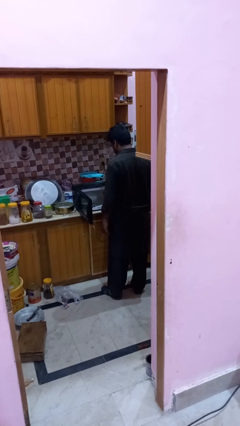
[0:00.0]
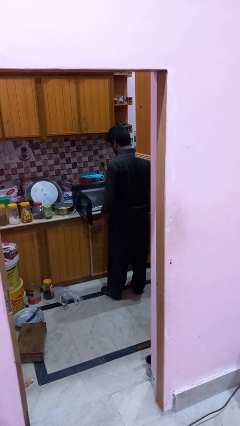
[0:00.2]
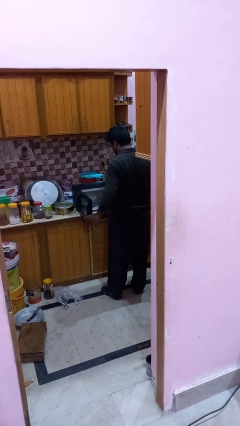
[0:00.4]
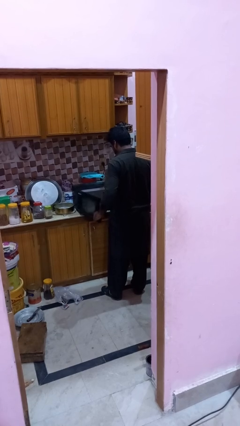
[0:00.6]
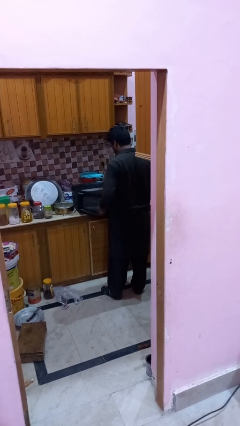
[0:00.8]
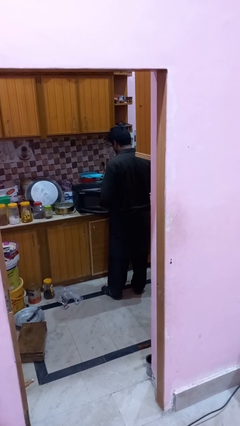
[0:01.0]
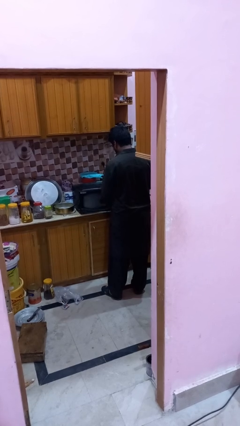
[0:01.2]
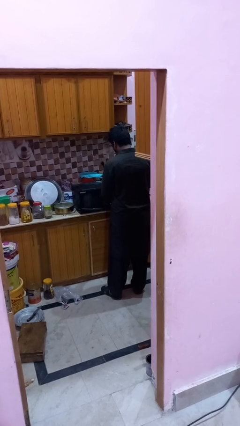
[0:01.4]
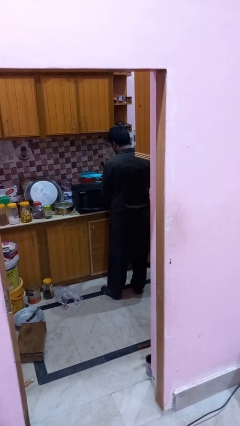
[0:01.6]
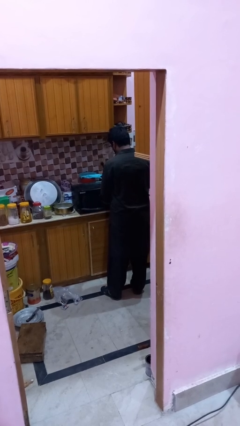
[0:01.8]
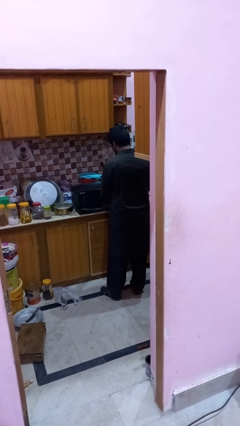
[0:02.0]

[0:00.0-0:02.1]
person closes oven door

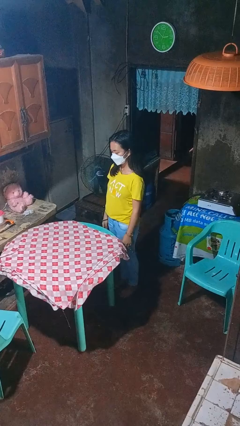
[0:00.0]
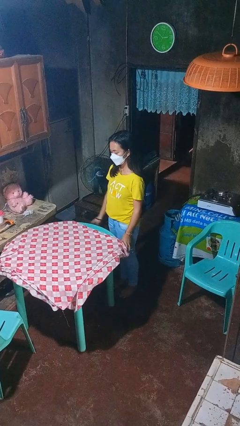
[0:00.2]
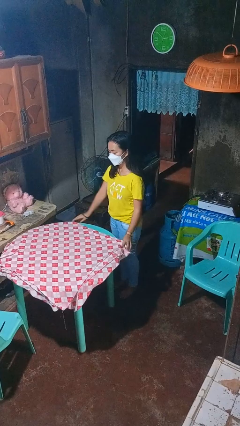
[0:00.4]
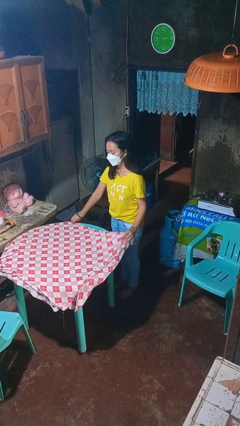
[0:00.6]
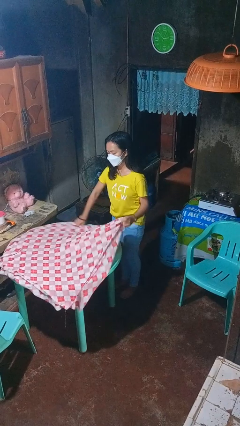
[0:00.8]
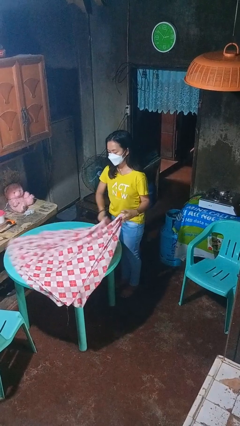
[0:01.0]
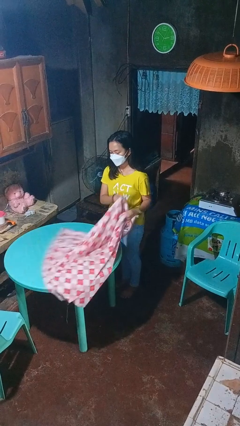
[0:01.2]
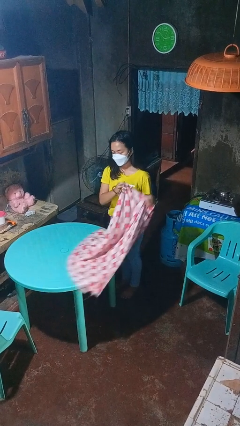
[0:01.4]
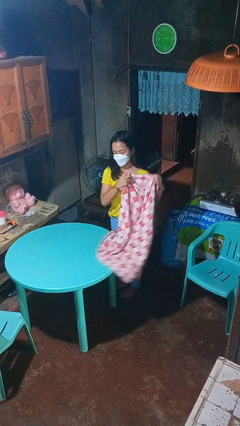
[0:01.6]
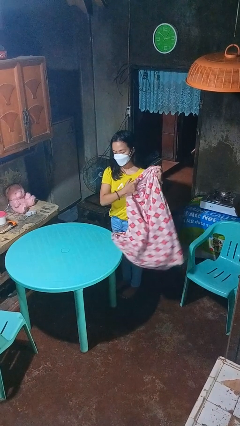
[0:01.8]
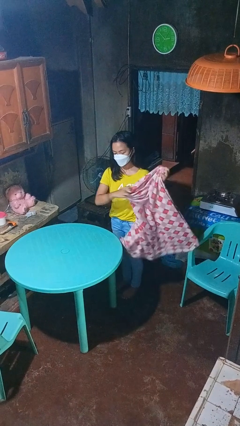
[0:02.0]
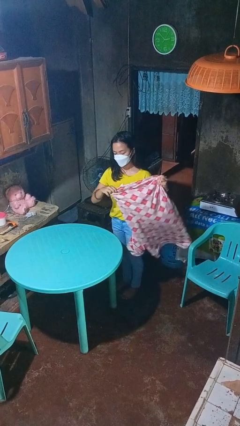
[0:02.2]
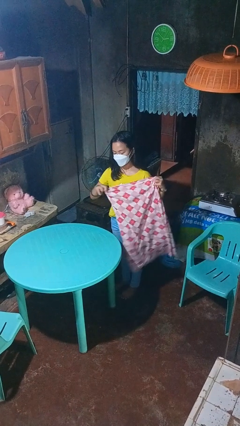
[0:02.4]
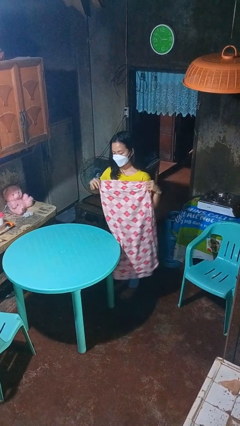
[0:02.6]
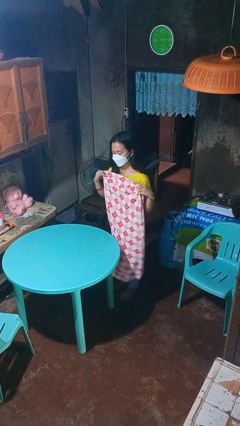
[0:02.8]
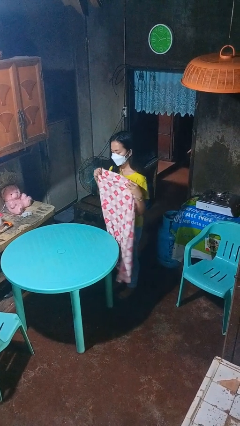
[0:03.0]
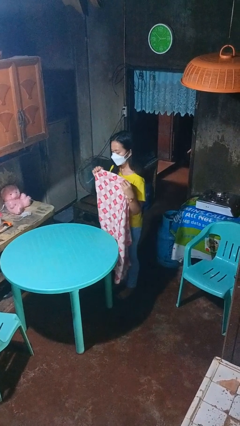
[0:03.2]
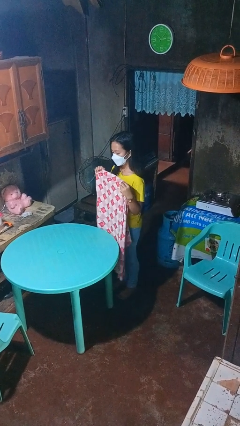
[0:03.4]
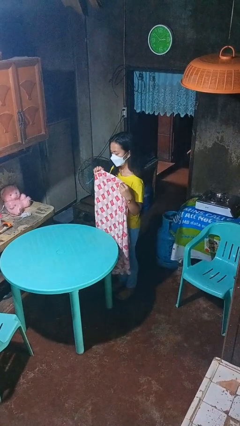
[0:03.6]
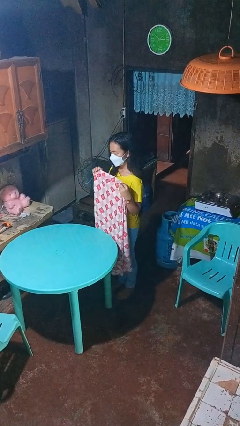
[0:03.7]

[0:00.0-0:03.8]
person folds tablecloth

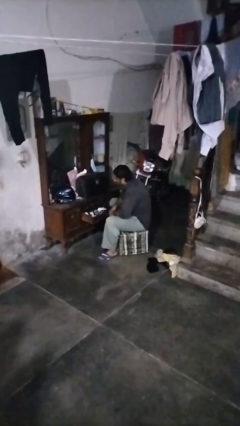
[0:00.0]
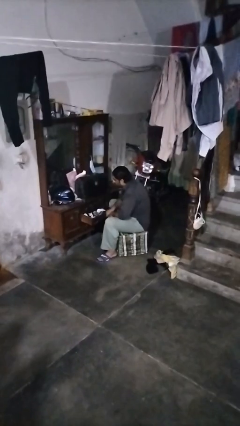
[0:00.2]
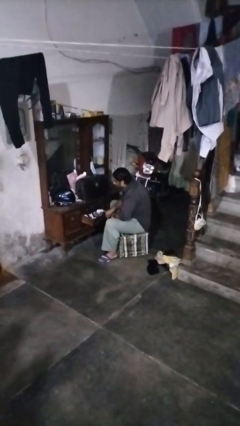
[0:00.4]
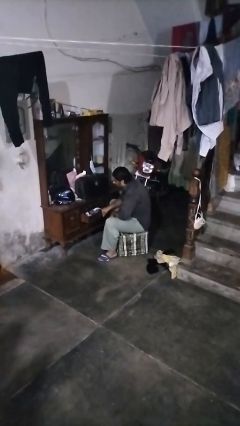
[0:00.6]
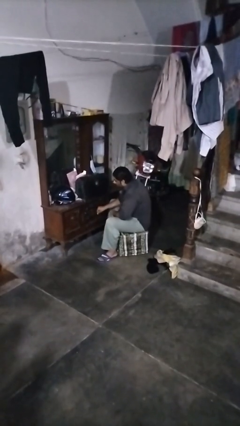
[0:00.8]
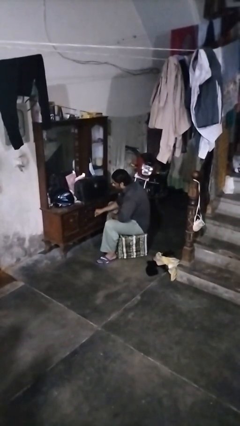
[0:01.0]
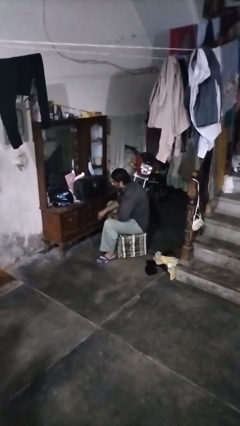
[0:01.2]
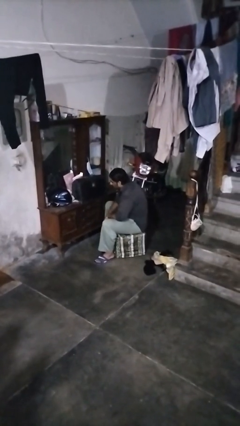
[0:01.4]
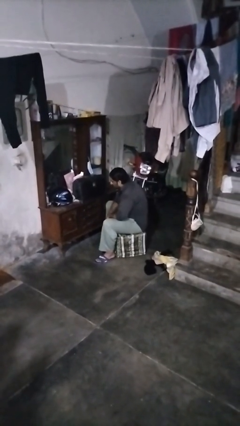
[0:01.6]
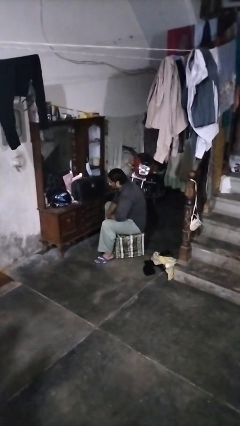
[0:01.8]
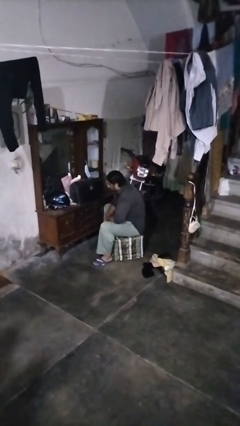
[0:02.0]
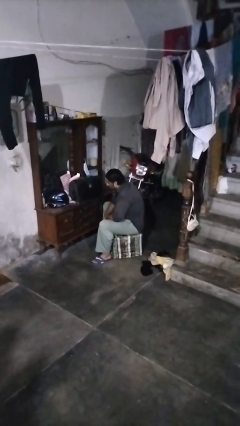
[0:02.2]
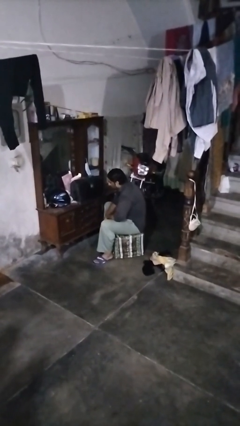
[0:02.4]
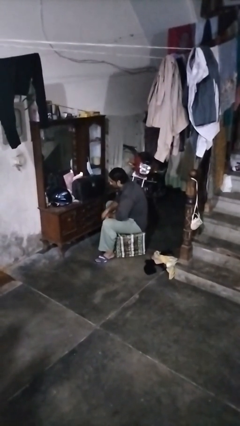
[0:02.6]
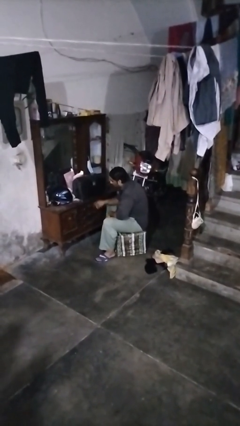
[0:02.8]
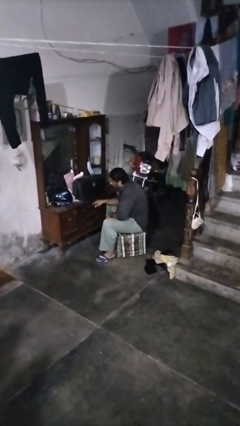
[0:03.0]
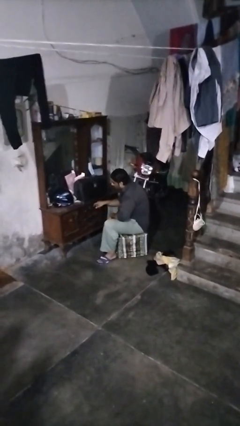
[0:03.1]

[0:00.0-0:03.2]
person closes dresser drawer

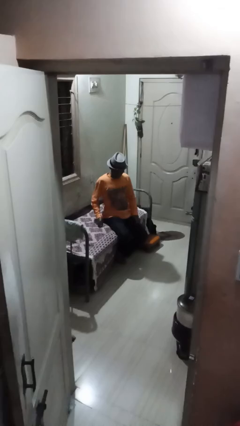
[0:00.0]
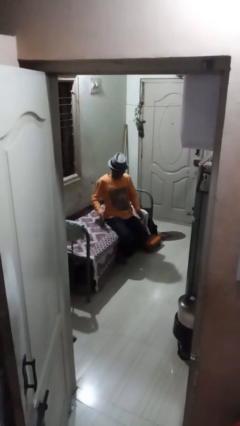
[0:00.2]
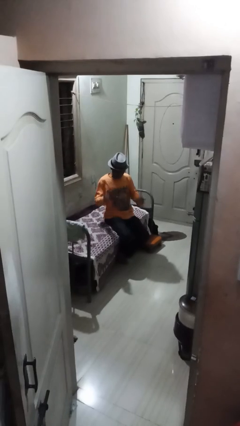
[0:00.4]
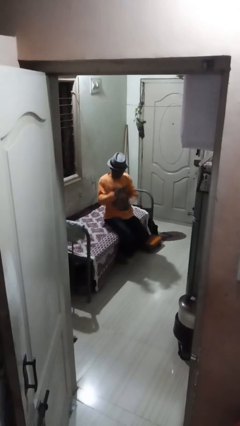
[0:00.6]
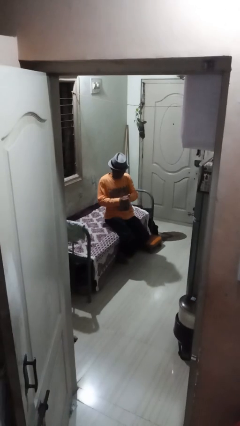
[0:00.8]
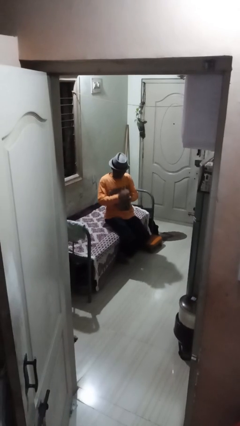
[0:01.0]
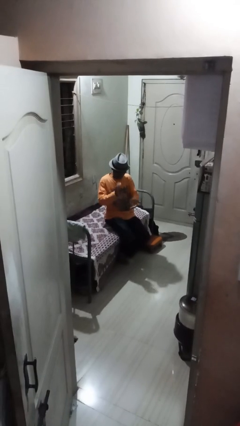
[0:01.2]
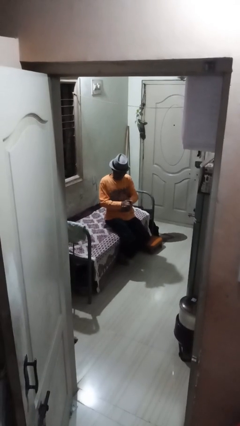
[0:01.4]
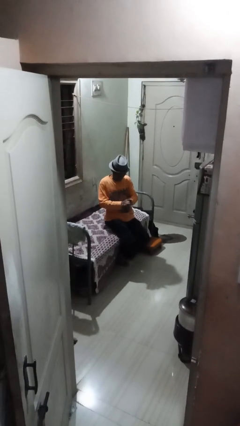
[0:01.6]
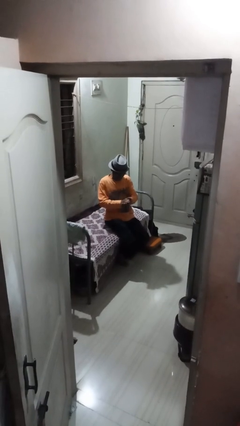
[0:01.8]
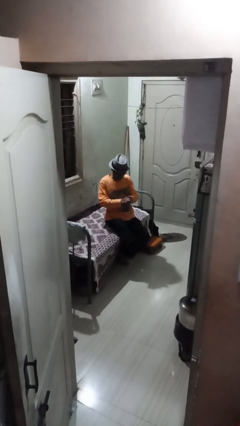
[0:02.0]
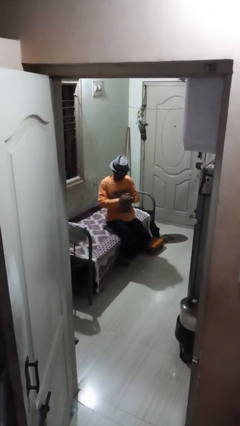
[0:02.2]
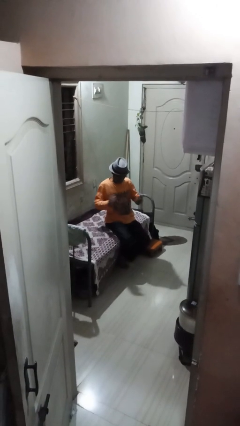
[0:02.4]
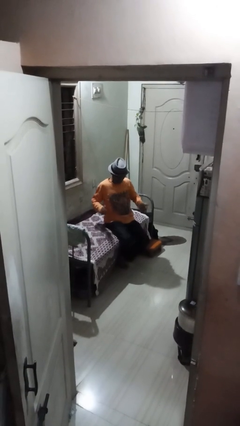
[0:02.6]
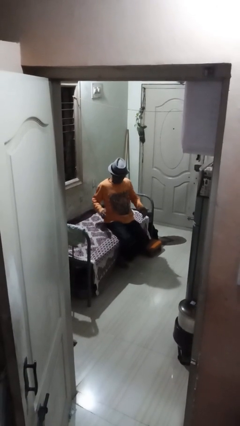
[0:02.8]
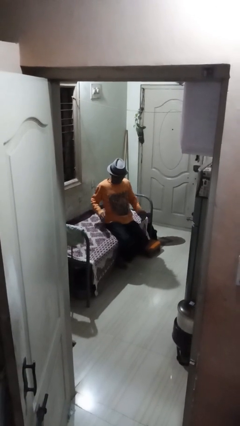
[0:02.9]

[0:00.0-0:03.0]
person claps hands

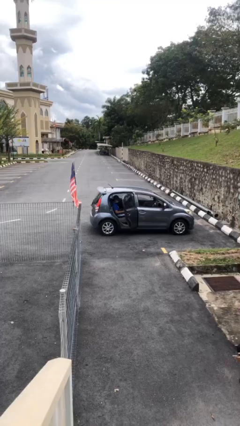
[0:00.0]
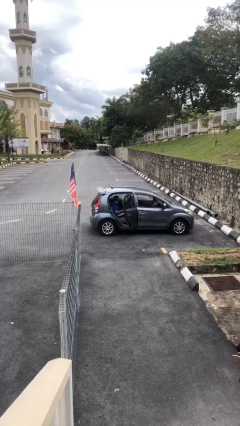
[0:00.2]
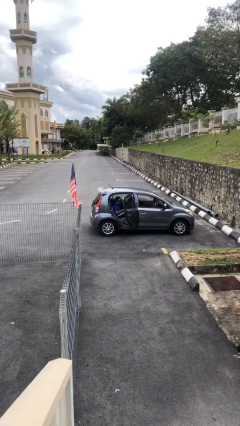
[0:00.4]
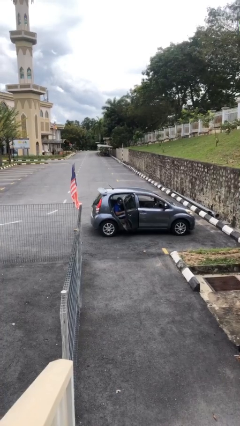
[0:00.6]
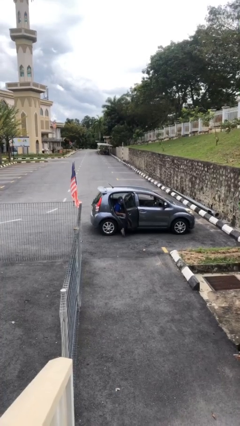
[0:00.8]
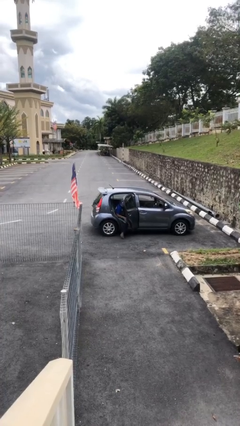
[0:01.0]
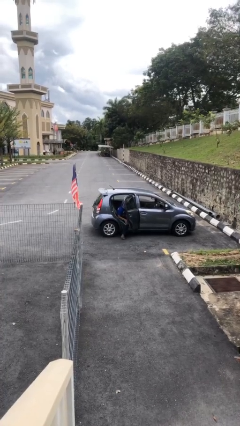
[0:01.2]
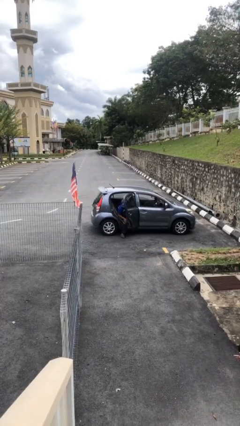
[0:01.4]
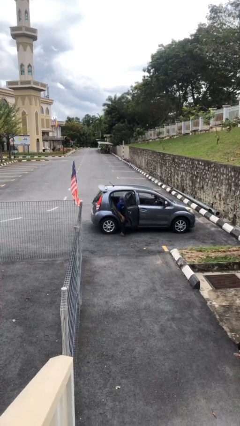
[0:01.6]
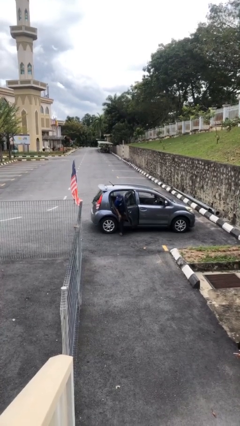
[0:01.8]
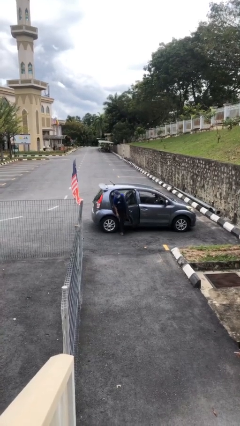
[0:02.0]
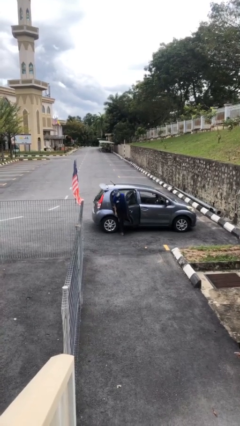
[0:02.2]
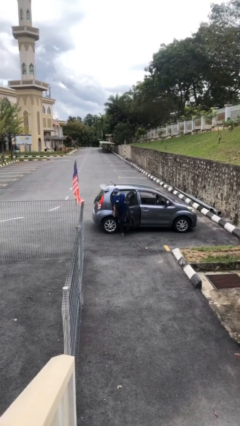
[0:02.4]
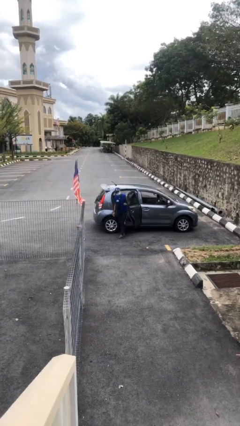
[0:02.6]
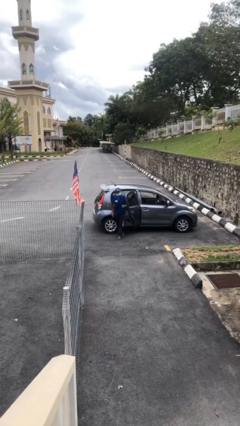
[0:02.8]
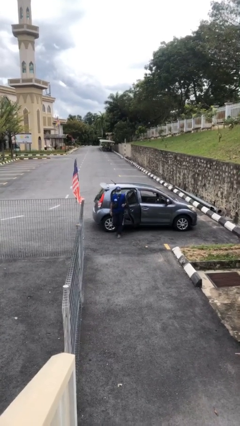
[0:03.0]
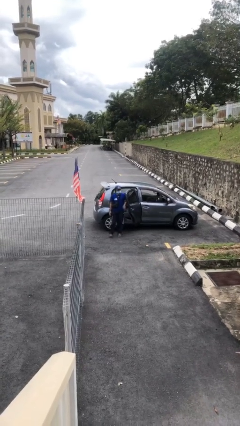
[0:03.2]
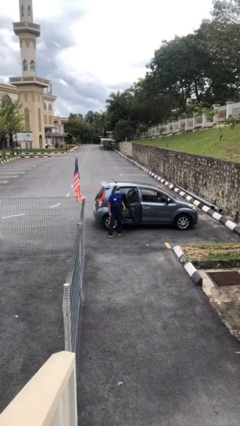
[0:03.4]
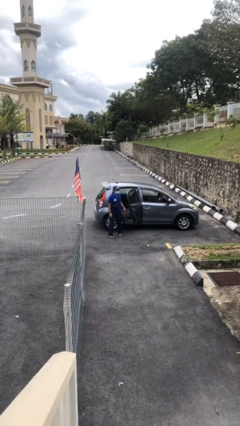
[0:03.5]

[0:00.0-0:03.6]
person exits car

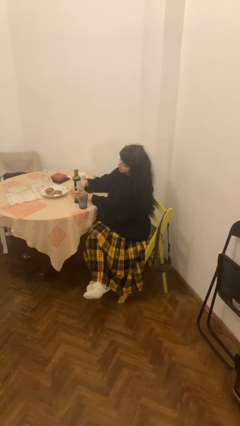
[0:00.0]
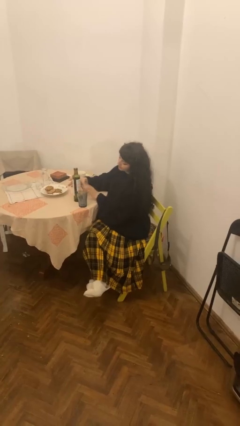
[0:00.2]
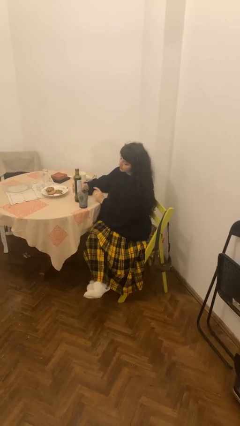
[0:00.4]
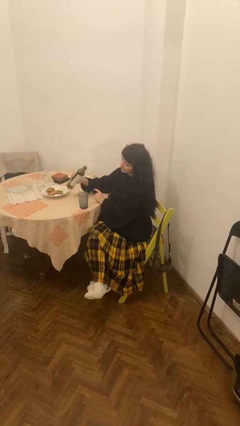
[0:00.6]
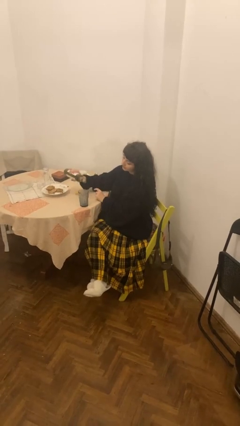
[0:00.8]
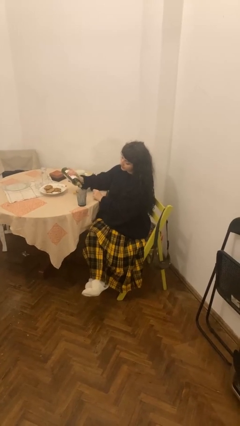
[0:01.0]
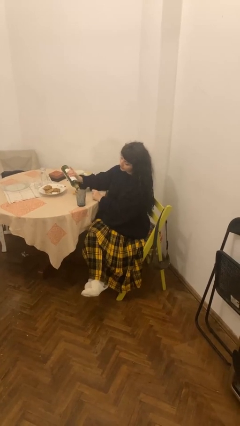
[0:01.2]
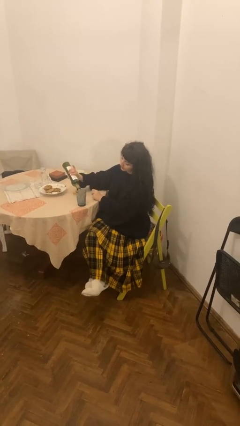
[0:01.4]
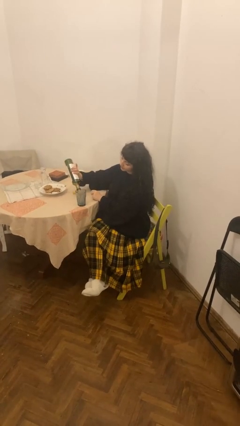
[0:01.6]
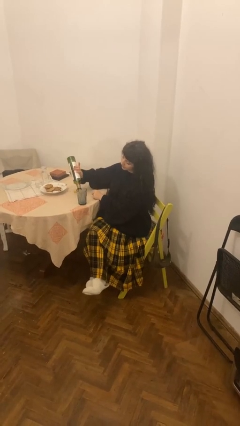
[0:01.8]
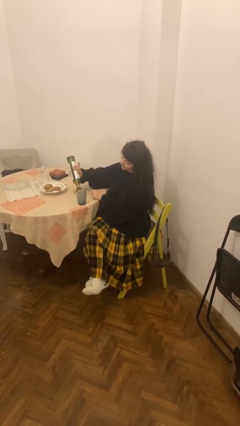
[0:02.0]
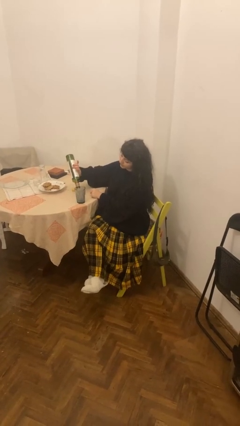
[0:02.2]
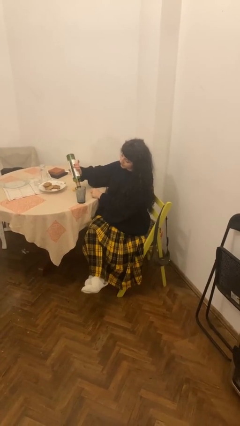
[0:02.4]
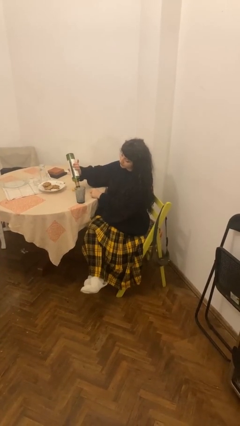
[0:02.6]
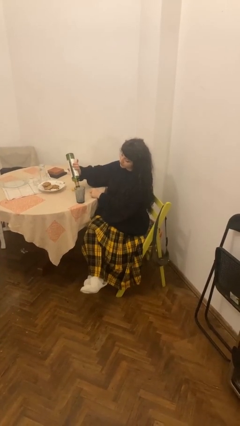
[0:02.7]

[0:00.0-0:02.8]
person pours liquid into cup
